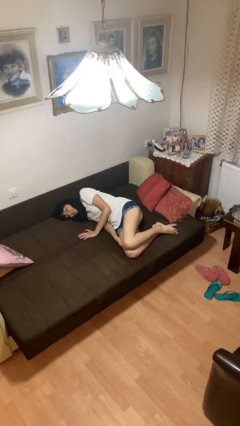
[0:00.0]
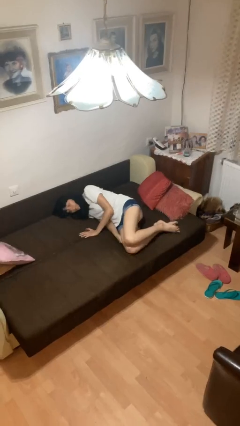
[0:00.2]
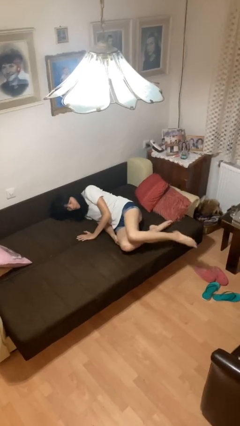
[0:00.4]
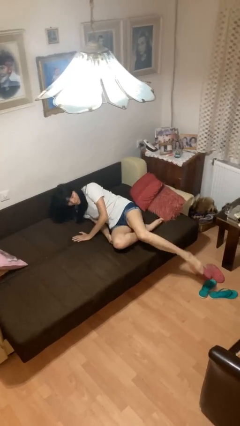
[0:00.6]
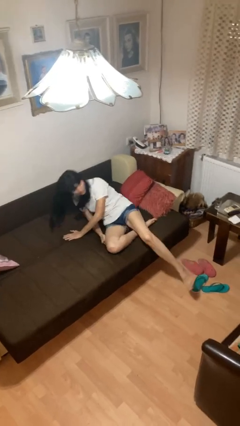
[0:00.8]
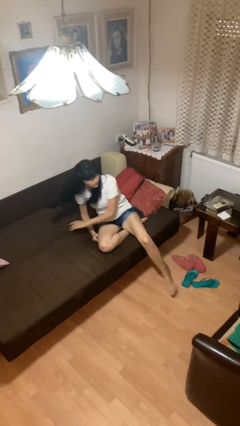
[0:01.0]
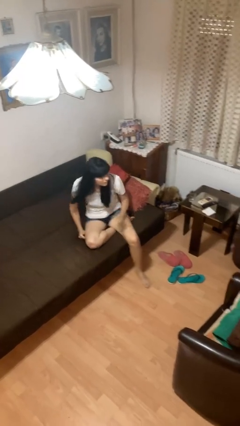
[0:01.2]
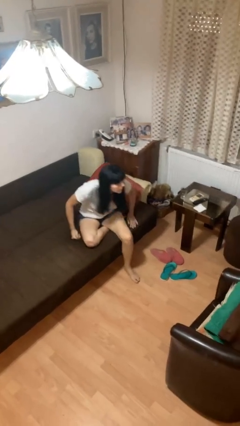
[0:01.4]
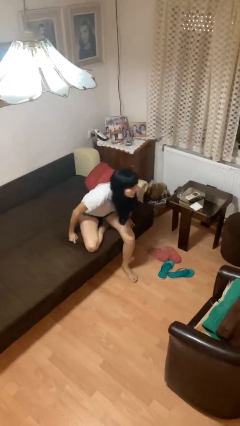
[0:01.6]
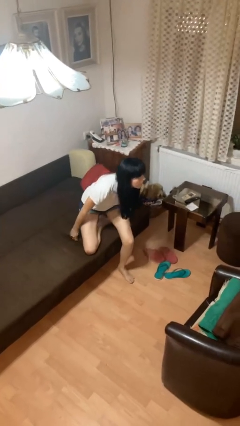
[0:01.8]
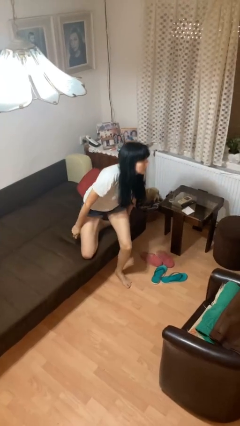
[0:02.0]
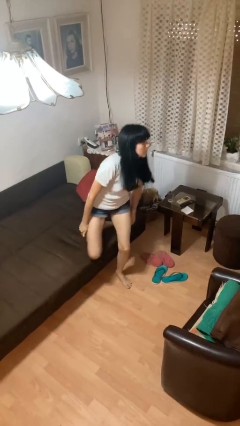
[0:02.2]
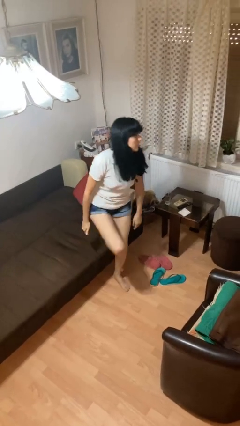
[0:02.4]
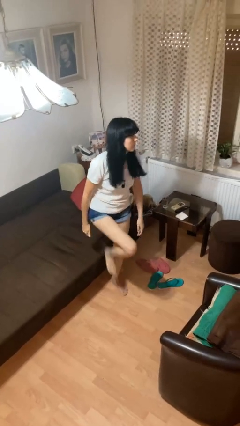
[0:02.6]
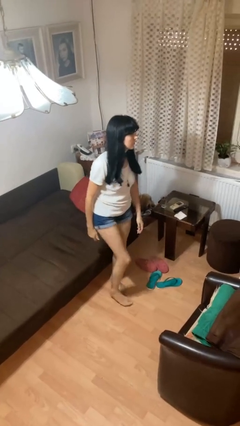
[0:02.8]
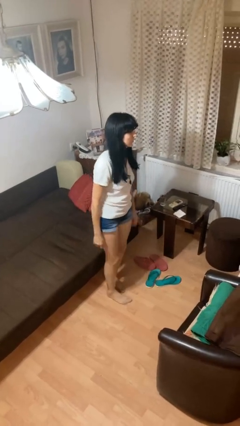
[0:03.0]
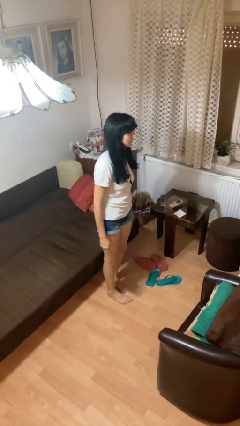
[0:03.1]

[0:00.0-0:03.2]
person stands up

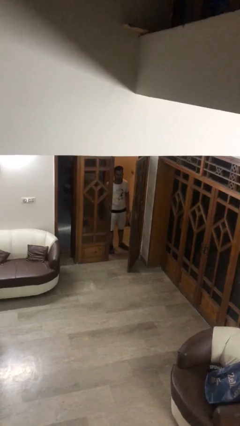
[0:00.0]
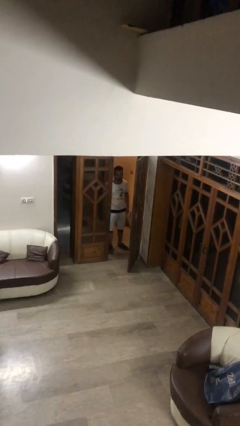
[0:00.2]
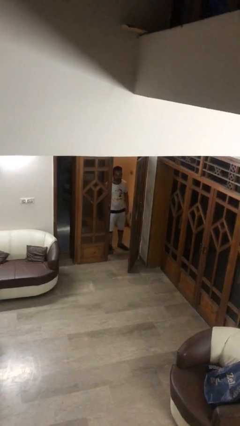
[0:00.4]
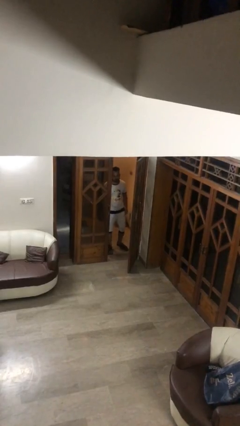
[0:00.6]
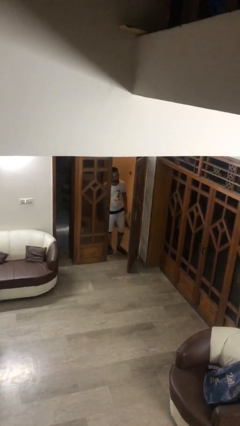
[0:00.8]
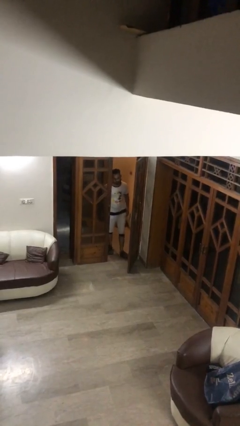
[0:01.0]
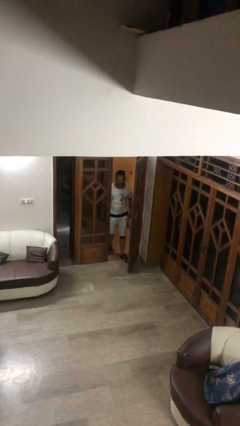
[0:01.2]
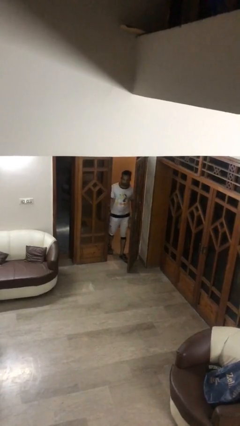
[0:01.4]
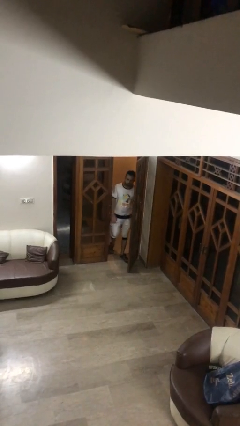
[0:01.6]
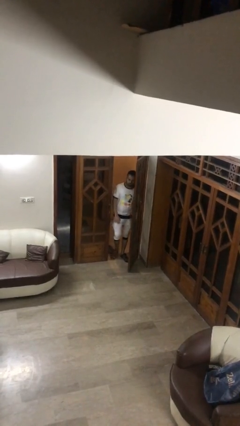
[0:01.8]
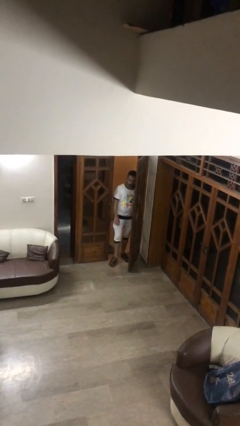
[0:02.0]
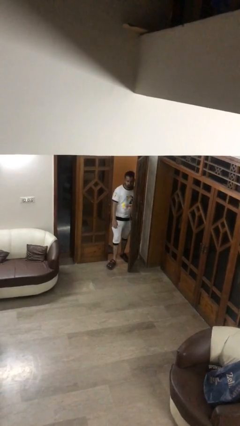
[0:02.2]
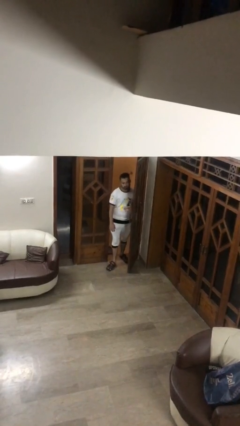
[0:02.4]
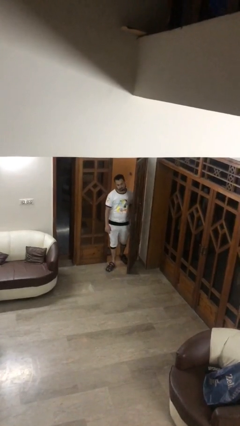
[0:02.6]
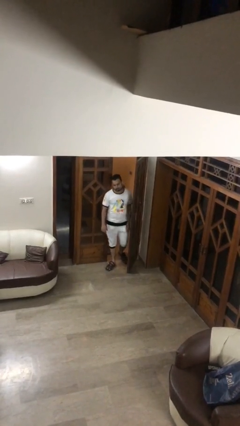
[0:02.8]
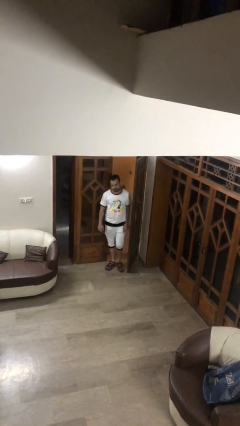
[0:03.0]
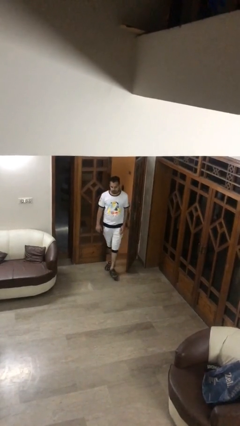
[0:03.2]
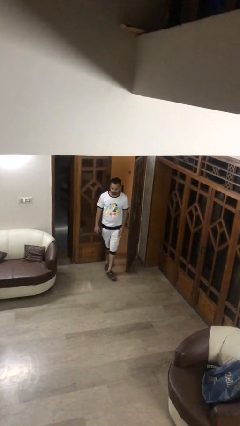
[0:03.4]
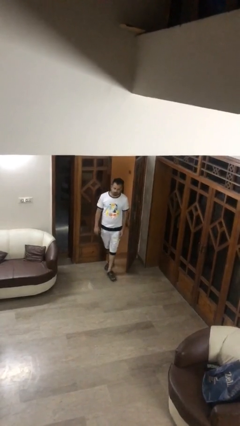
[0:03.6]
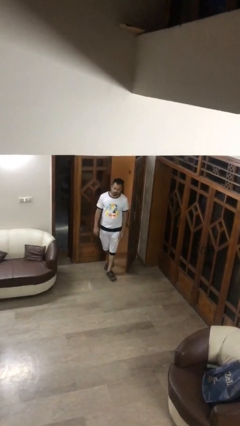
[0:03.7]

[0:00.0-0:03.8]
person enters scene through structure

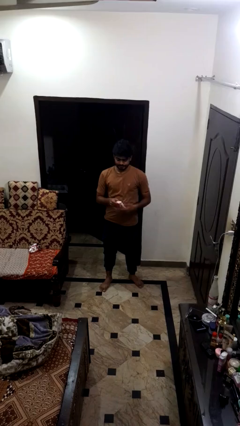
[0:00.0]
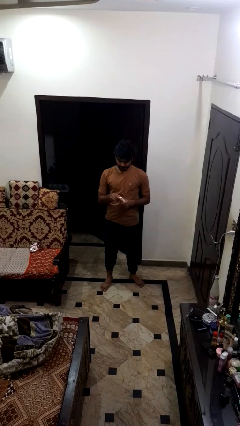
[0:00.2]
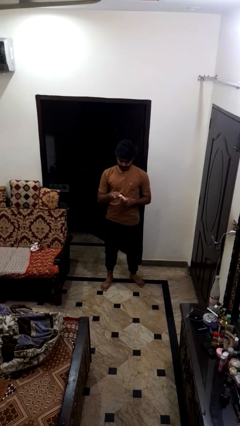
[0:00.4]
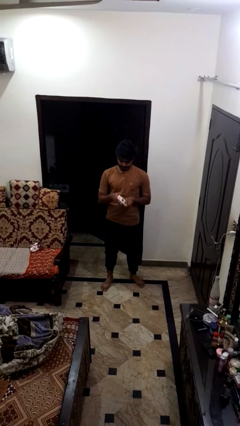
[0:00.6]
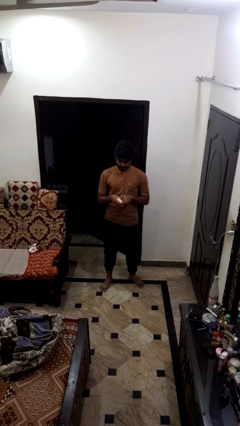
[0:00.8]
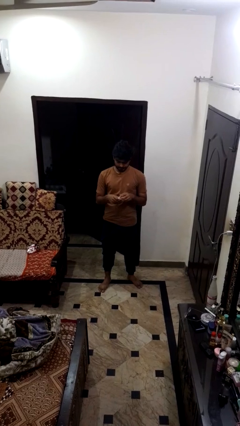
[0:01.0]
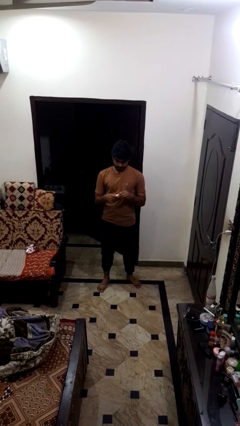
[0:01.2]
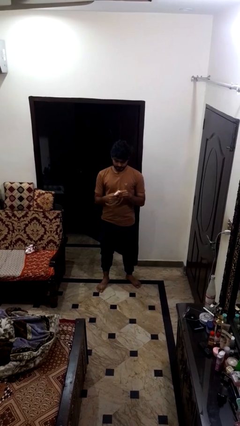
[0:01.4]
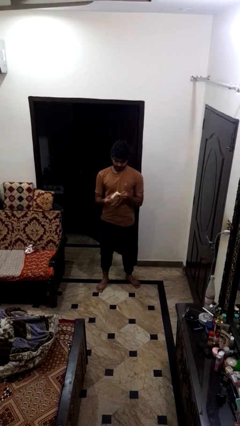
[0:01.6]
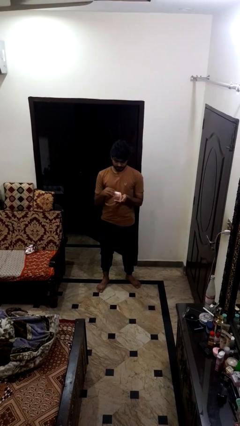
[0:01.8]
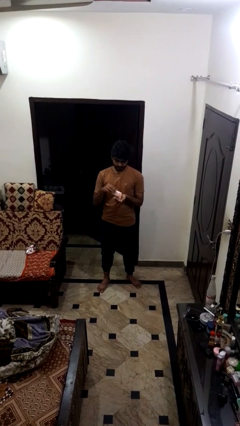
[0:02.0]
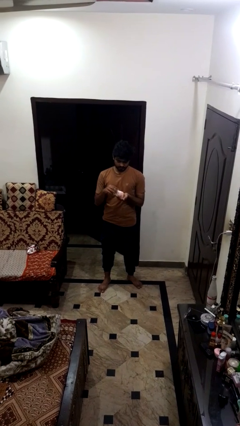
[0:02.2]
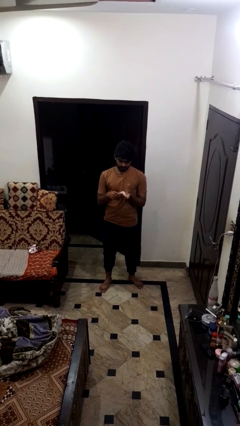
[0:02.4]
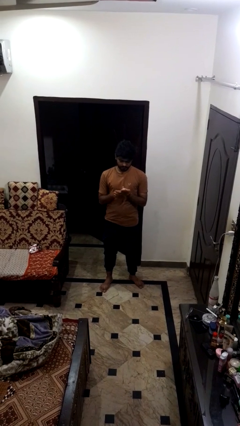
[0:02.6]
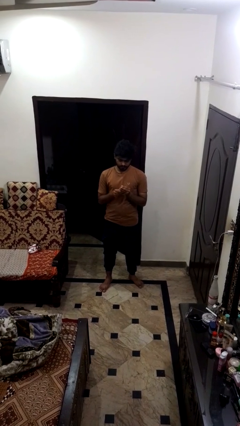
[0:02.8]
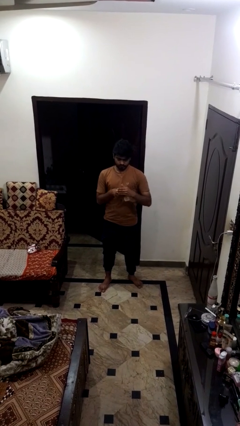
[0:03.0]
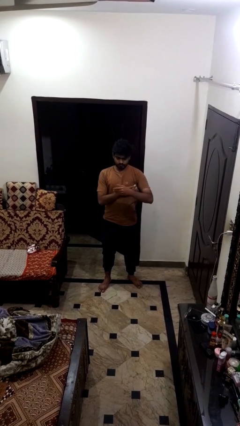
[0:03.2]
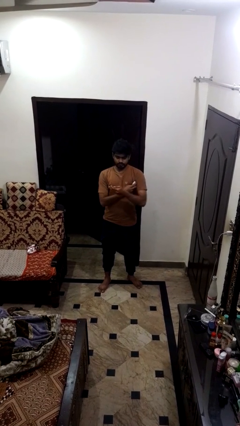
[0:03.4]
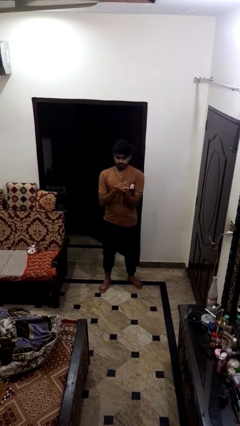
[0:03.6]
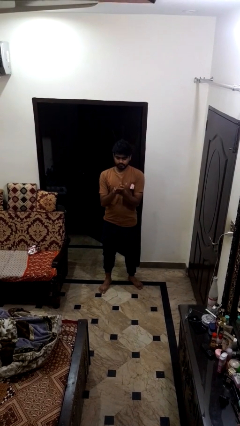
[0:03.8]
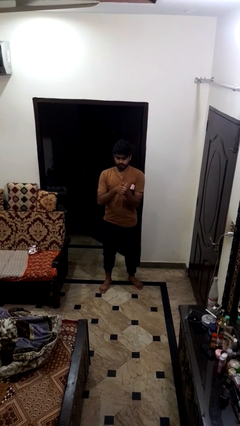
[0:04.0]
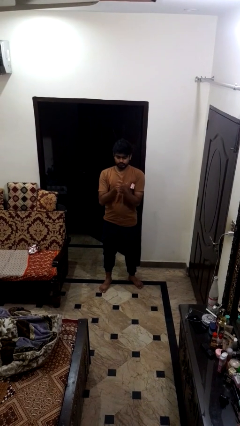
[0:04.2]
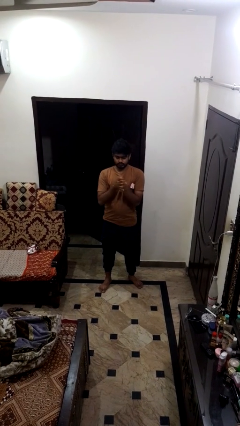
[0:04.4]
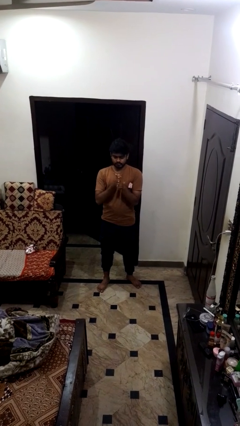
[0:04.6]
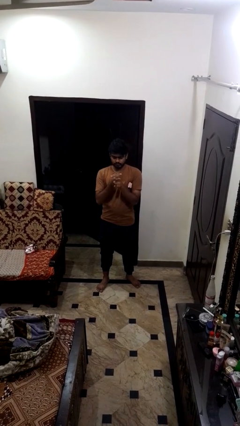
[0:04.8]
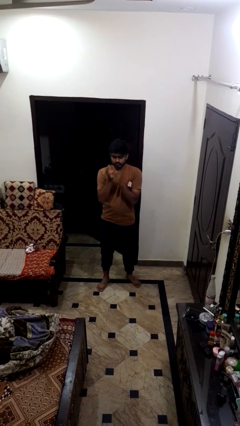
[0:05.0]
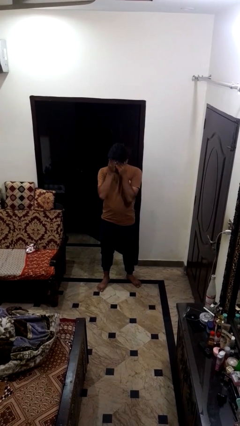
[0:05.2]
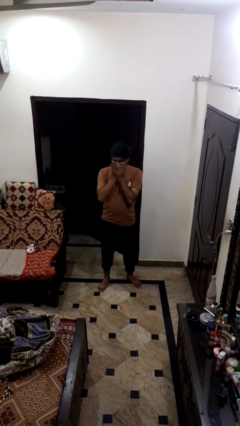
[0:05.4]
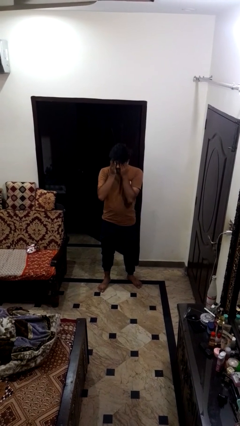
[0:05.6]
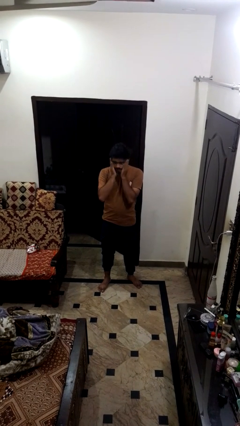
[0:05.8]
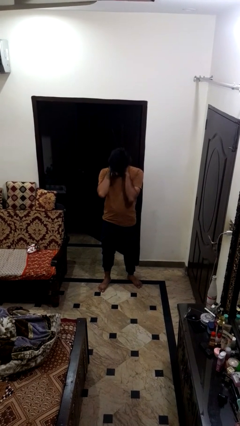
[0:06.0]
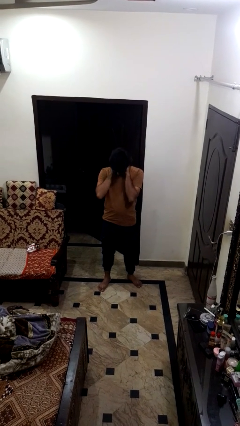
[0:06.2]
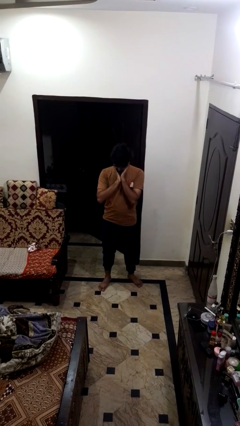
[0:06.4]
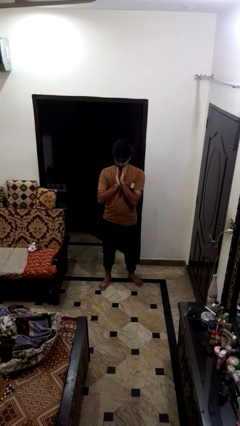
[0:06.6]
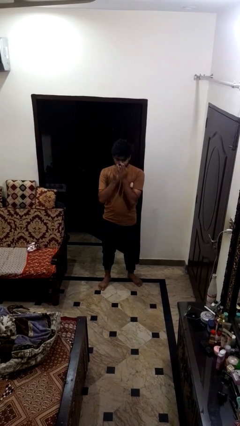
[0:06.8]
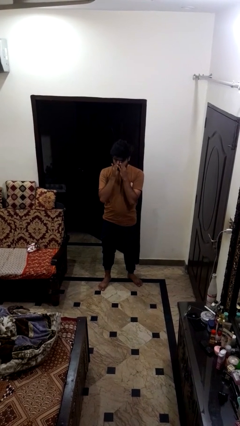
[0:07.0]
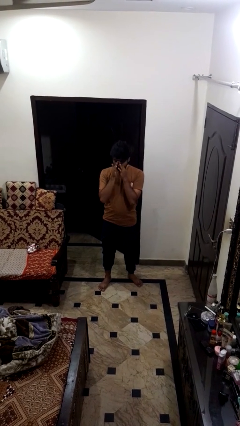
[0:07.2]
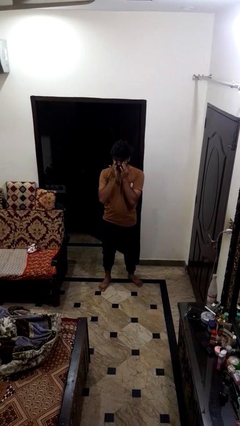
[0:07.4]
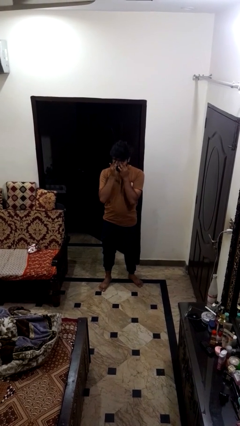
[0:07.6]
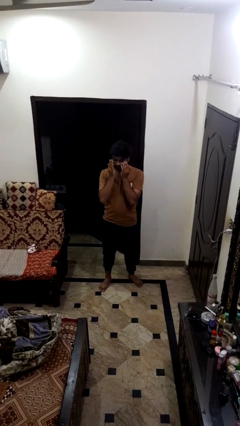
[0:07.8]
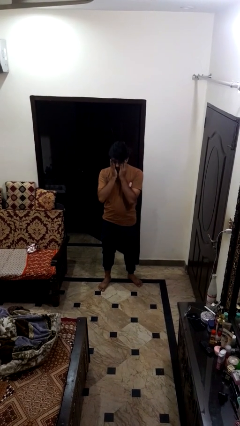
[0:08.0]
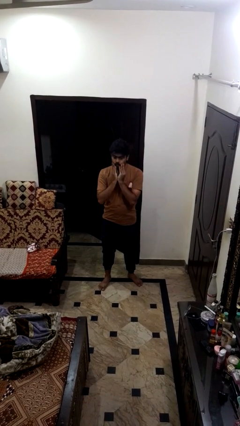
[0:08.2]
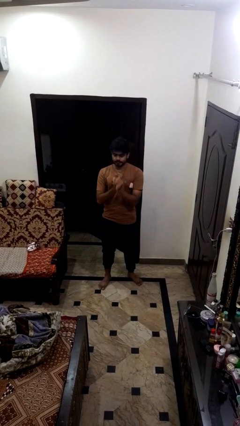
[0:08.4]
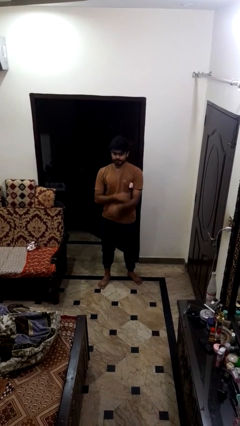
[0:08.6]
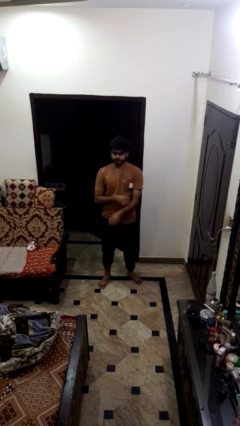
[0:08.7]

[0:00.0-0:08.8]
person applies facial moisturizer

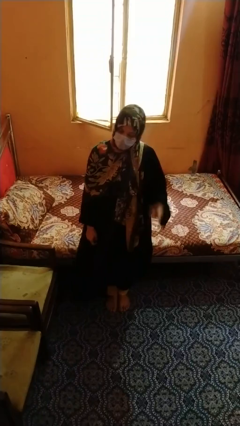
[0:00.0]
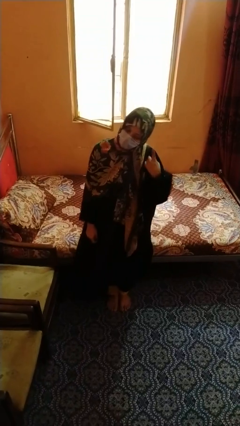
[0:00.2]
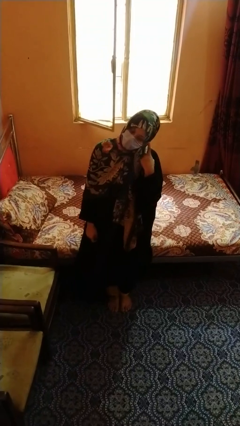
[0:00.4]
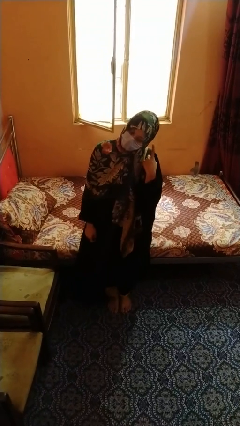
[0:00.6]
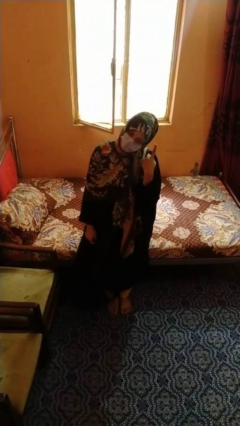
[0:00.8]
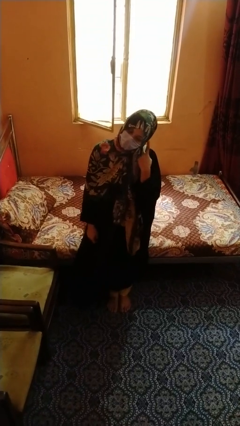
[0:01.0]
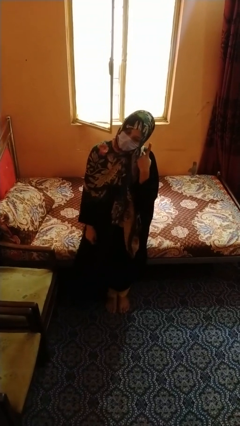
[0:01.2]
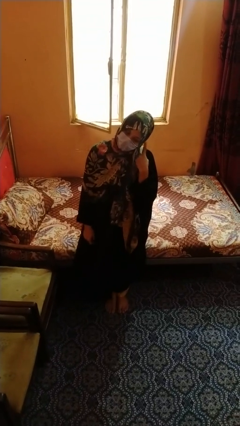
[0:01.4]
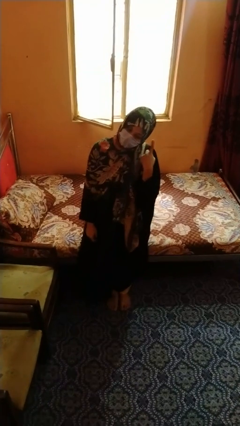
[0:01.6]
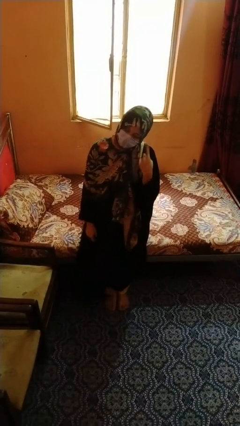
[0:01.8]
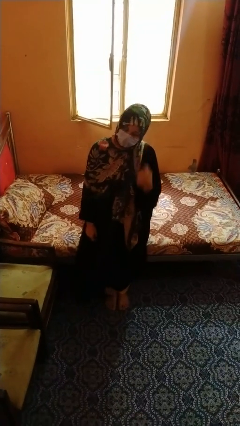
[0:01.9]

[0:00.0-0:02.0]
person gestures listen closely

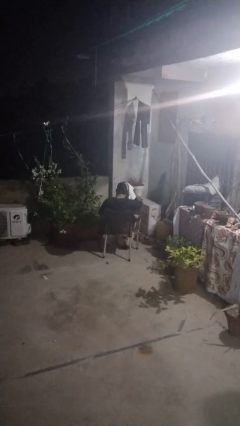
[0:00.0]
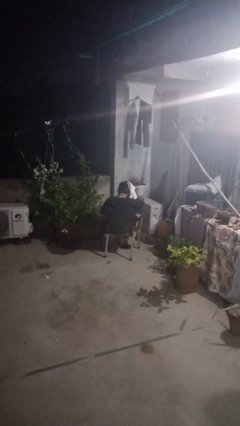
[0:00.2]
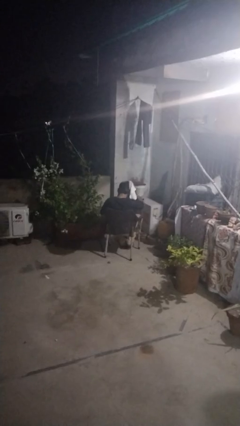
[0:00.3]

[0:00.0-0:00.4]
person dries hair with towel
